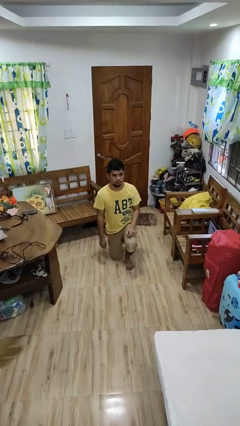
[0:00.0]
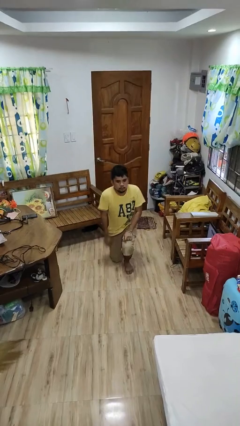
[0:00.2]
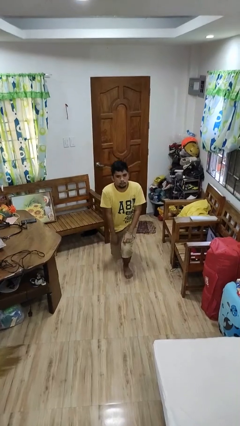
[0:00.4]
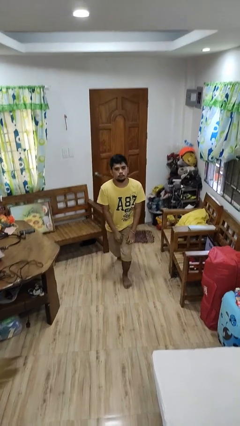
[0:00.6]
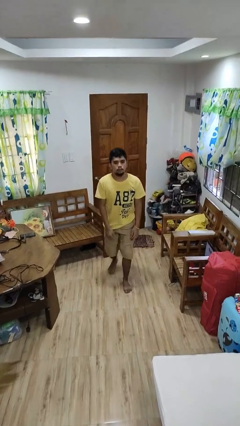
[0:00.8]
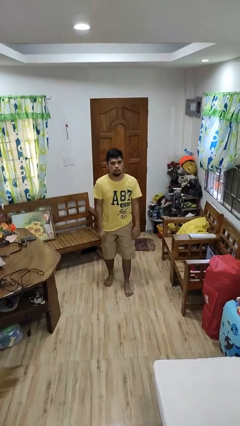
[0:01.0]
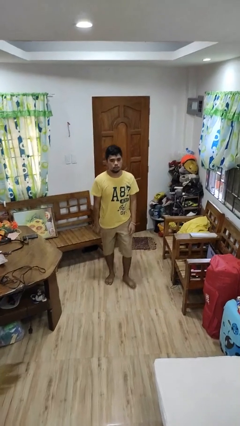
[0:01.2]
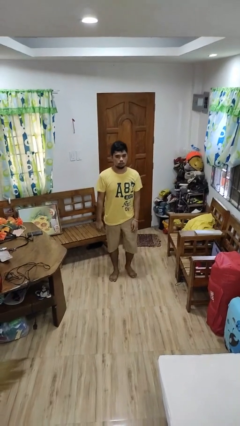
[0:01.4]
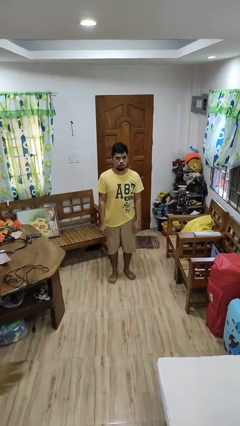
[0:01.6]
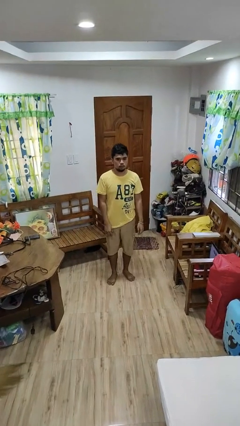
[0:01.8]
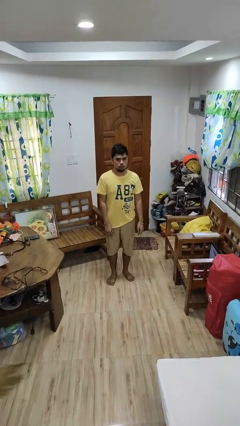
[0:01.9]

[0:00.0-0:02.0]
person stands up from floor

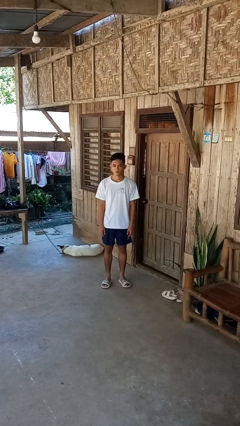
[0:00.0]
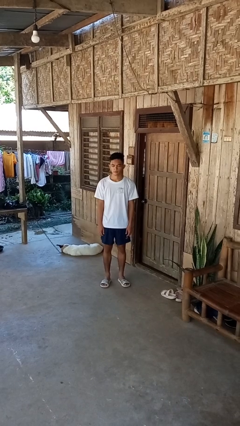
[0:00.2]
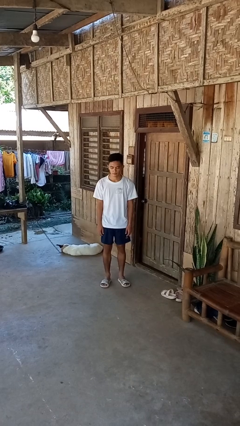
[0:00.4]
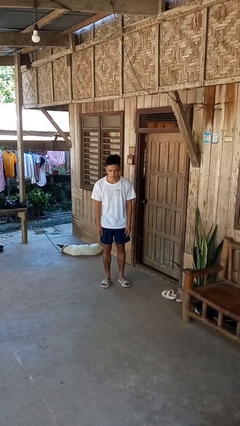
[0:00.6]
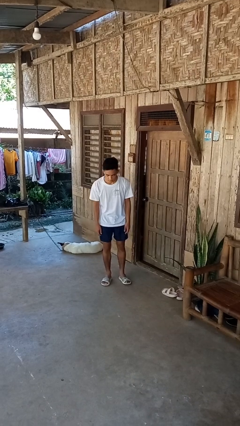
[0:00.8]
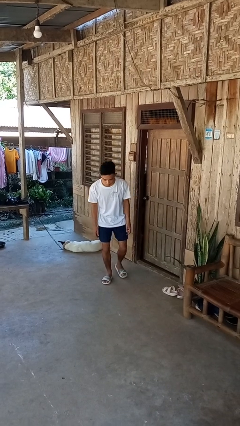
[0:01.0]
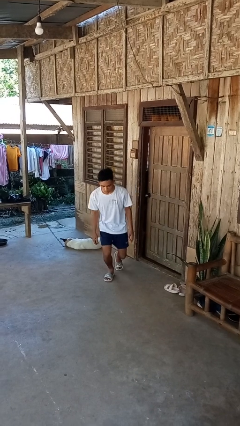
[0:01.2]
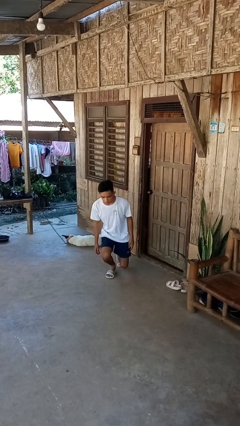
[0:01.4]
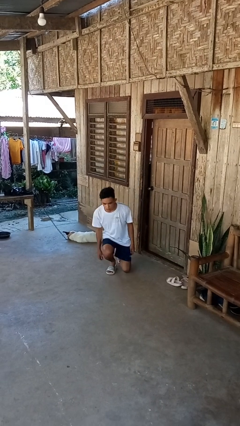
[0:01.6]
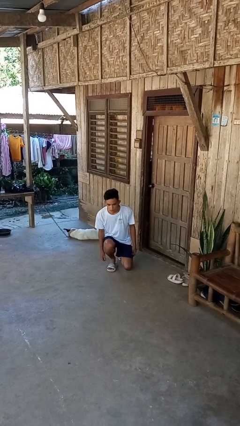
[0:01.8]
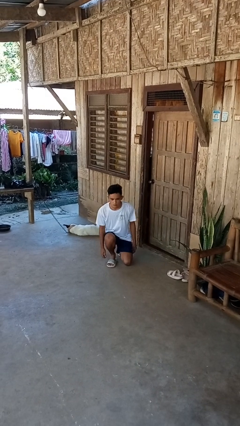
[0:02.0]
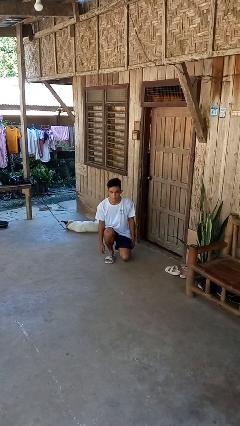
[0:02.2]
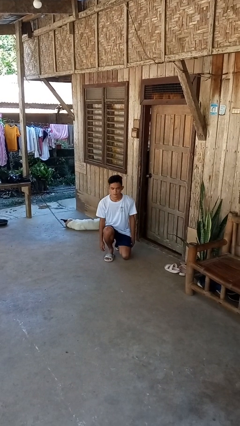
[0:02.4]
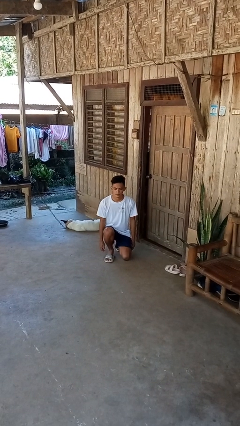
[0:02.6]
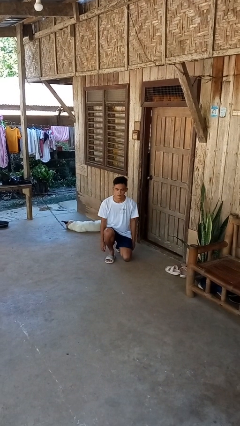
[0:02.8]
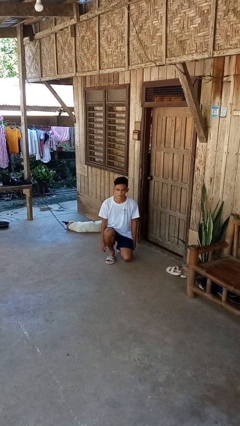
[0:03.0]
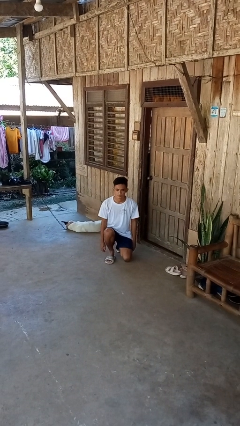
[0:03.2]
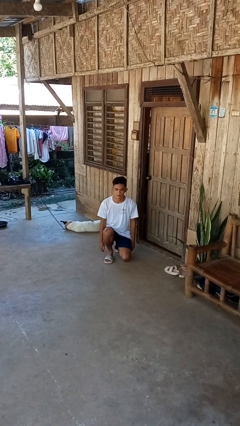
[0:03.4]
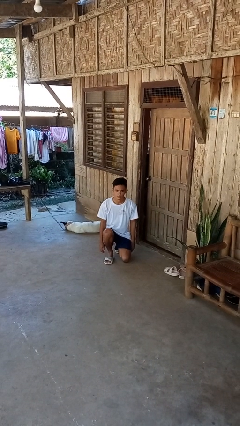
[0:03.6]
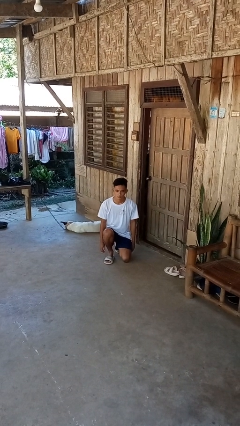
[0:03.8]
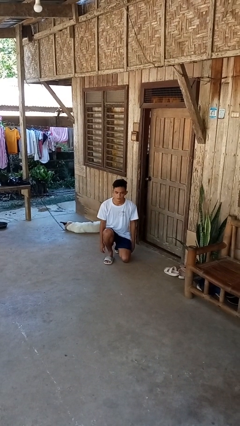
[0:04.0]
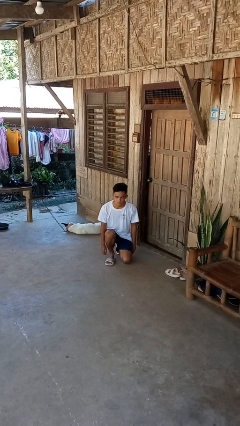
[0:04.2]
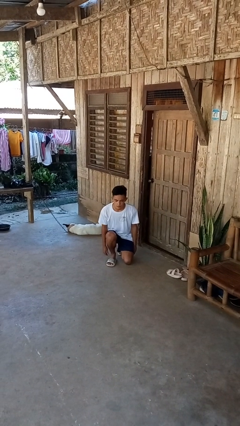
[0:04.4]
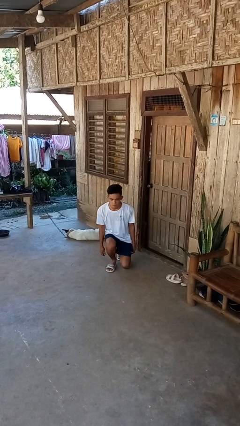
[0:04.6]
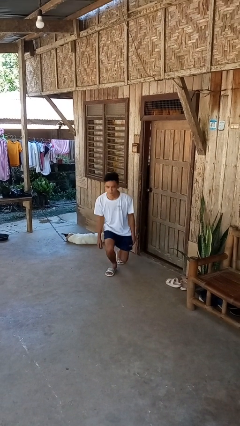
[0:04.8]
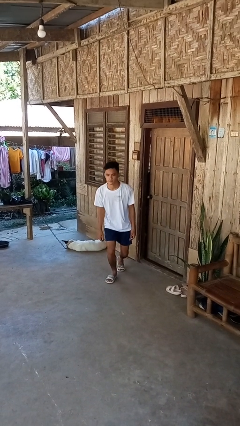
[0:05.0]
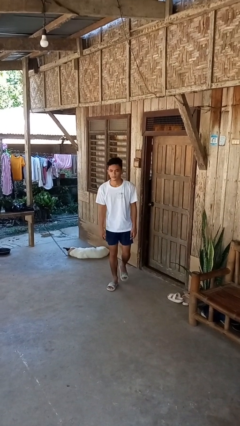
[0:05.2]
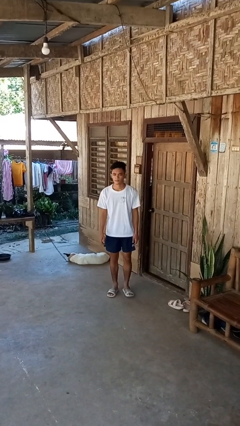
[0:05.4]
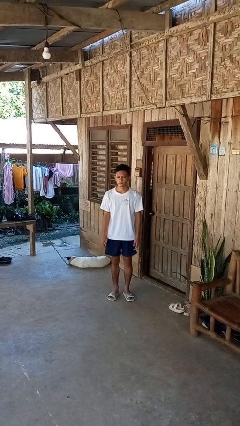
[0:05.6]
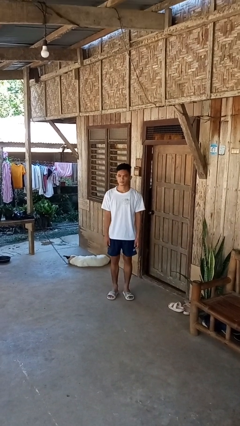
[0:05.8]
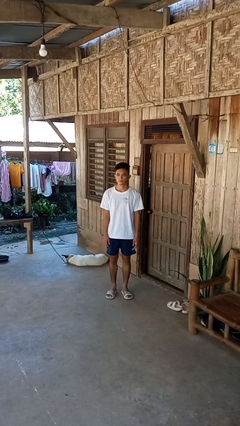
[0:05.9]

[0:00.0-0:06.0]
person kneels

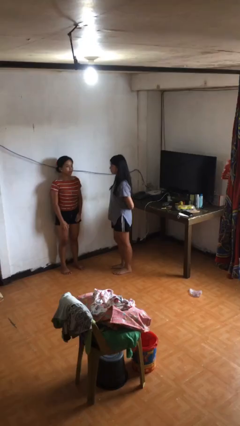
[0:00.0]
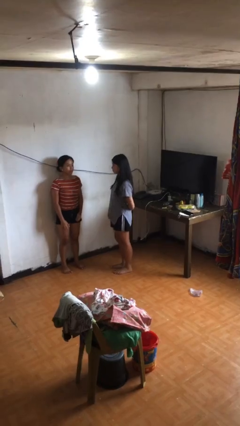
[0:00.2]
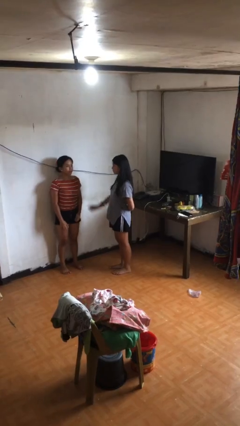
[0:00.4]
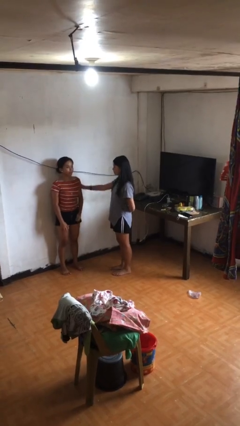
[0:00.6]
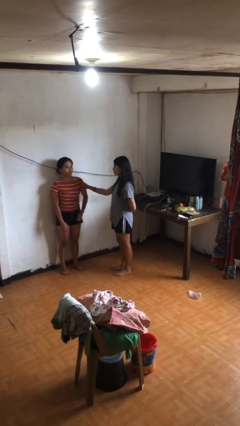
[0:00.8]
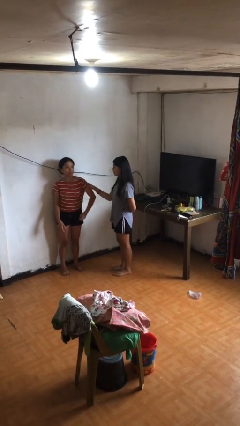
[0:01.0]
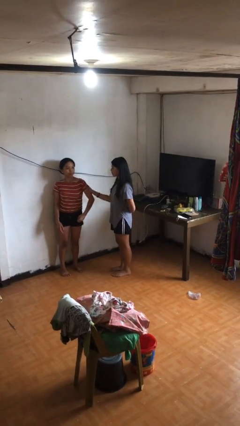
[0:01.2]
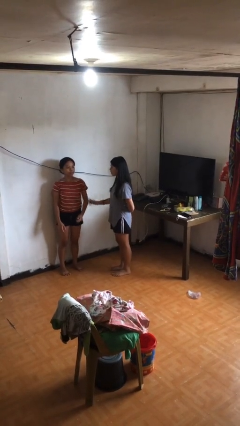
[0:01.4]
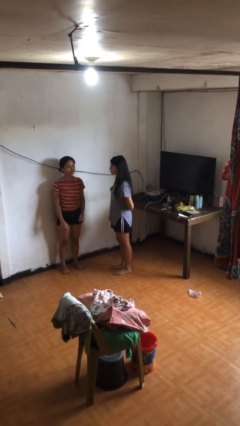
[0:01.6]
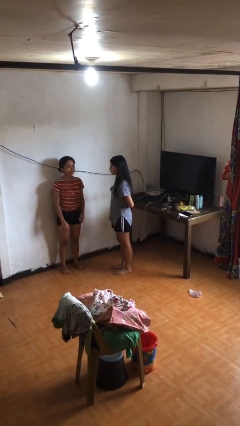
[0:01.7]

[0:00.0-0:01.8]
person grabs person by bicep

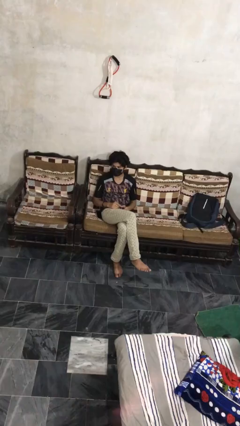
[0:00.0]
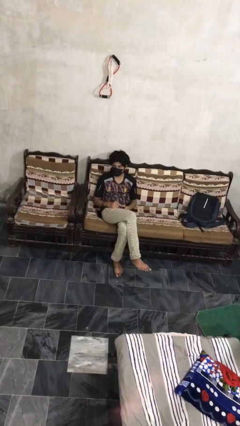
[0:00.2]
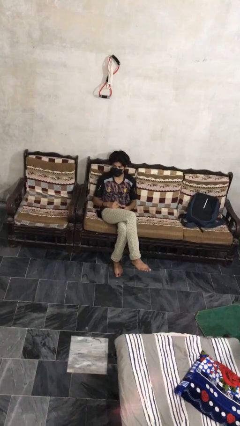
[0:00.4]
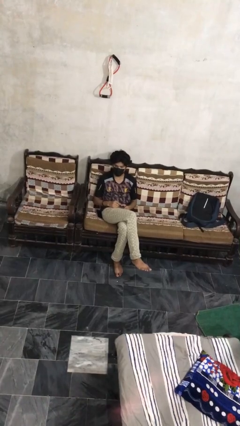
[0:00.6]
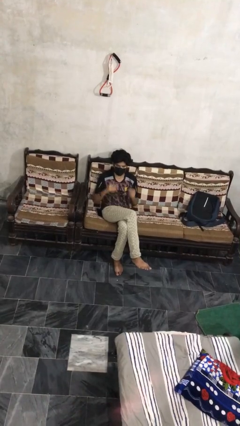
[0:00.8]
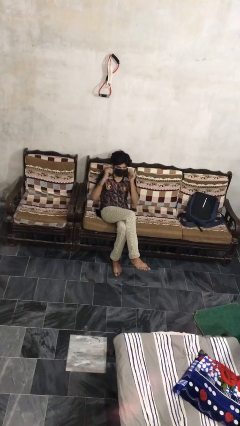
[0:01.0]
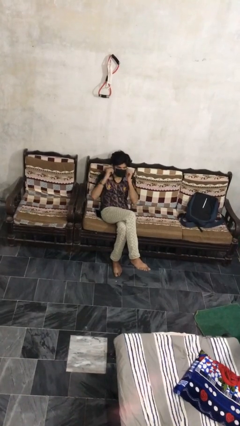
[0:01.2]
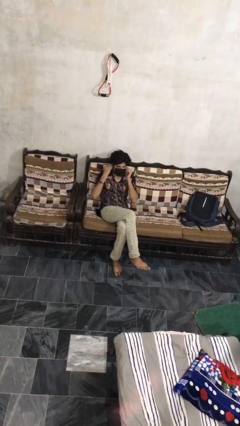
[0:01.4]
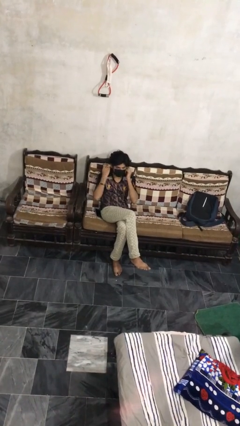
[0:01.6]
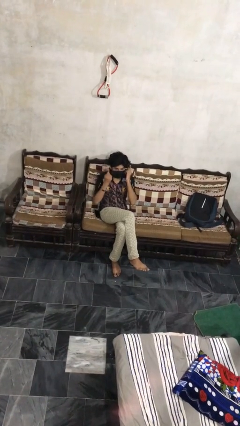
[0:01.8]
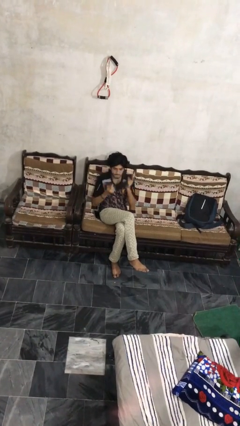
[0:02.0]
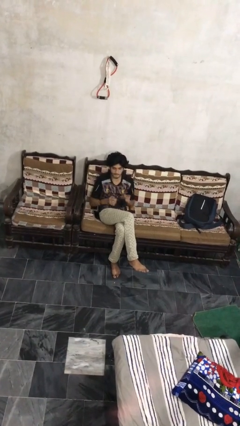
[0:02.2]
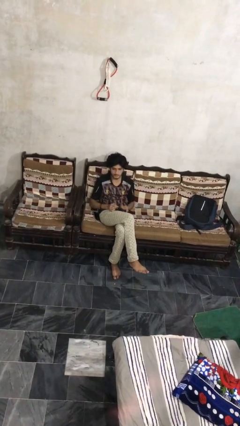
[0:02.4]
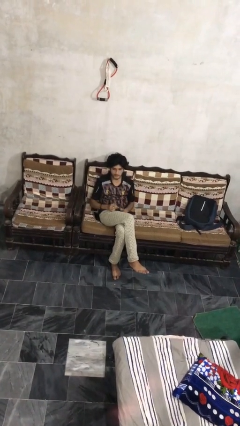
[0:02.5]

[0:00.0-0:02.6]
person takes off facemask

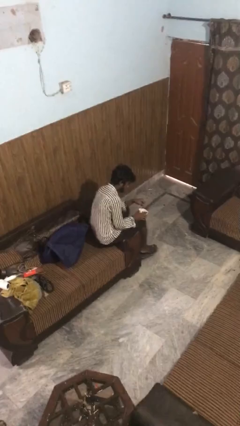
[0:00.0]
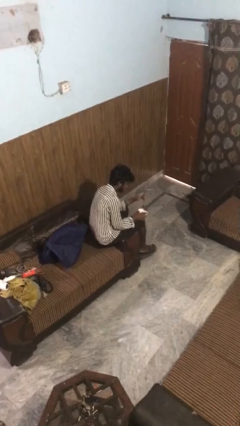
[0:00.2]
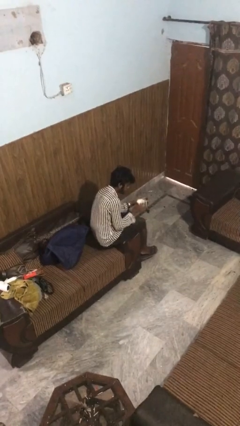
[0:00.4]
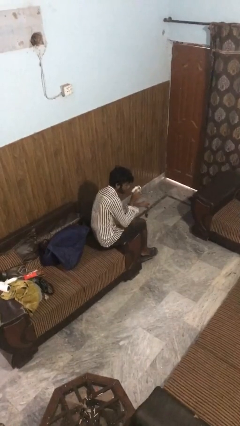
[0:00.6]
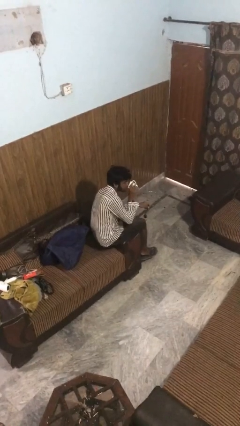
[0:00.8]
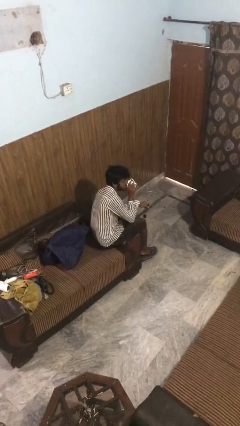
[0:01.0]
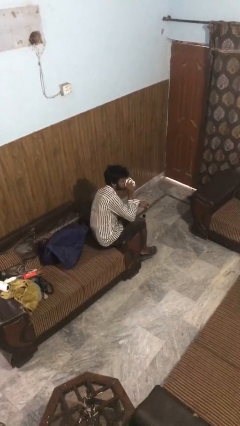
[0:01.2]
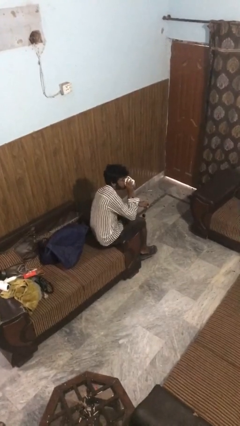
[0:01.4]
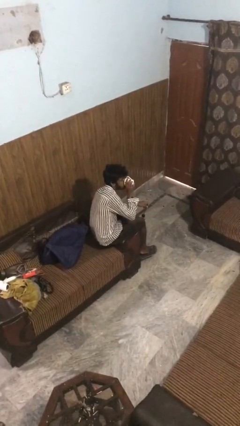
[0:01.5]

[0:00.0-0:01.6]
person drinks from mug

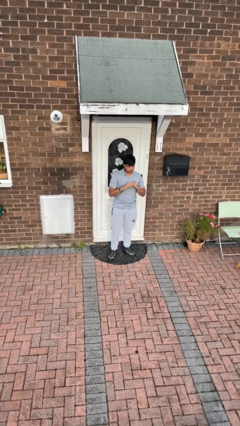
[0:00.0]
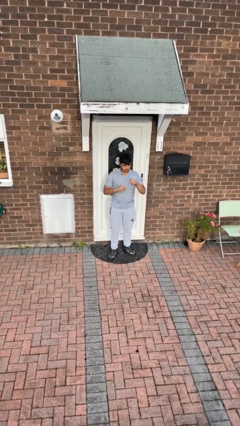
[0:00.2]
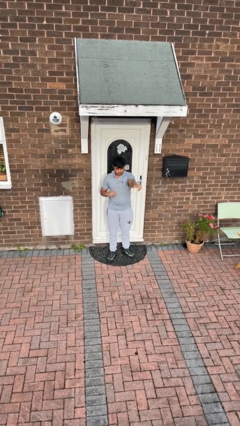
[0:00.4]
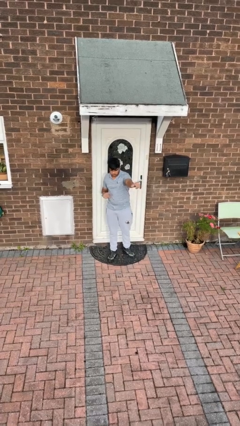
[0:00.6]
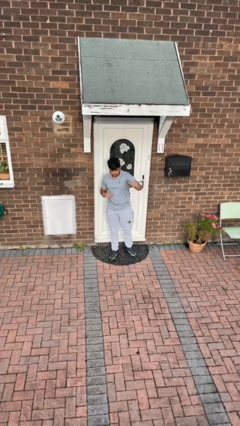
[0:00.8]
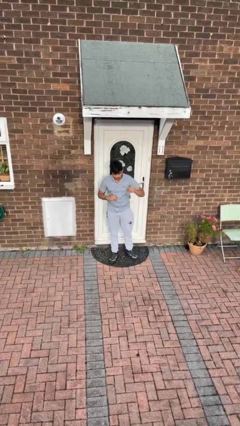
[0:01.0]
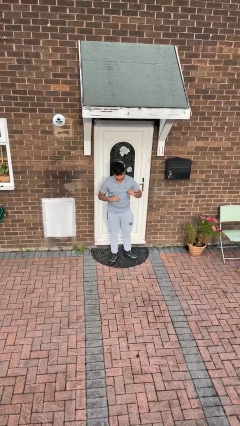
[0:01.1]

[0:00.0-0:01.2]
person punches

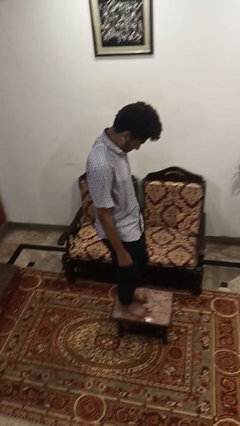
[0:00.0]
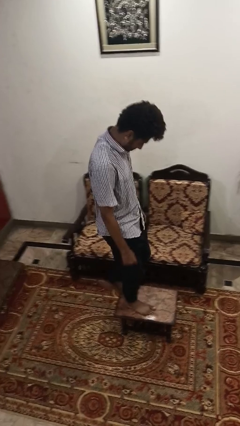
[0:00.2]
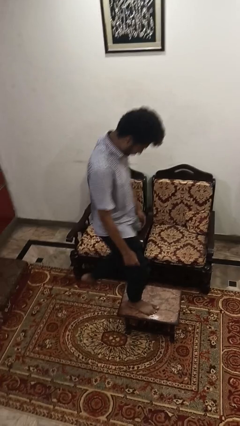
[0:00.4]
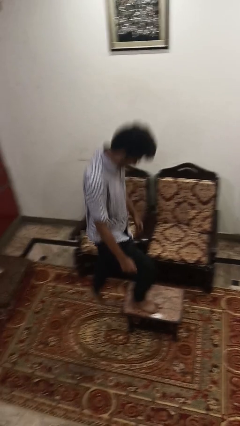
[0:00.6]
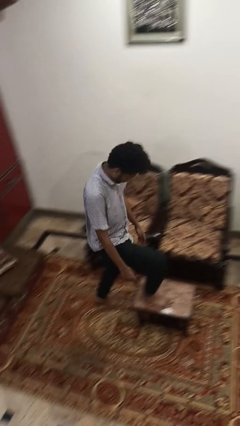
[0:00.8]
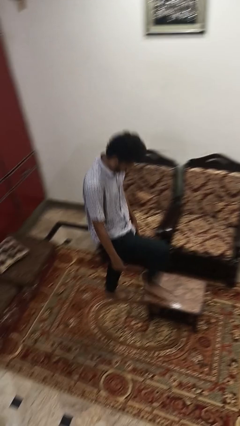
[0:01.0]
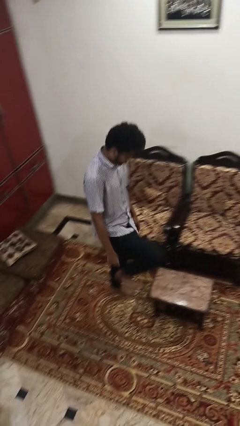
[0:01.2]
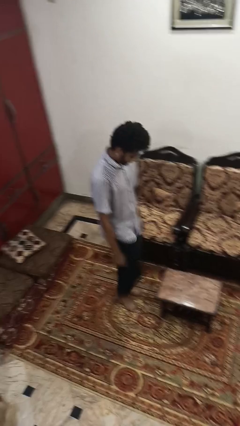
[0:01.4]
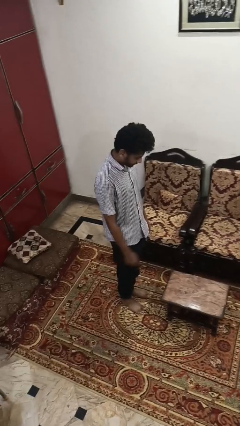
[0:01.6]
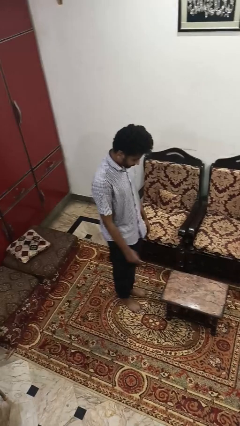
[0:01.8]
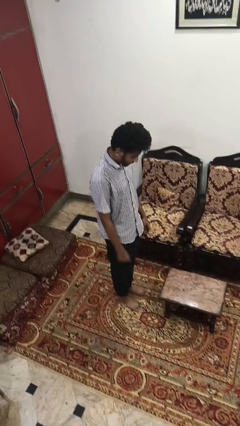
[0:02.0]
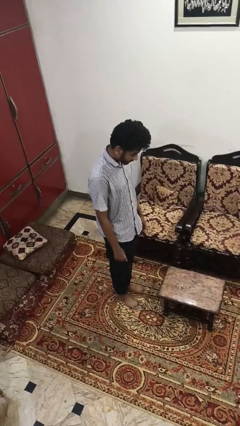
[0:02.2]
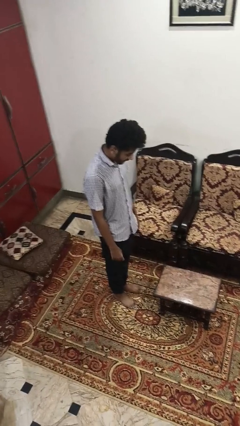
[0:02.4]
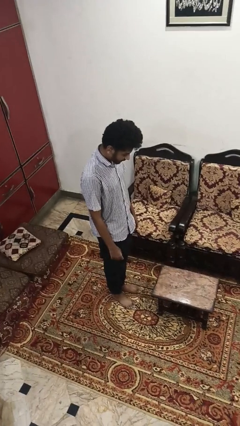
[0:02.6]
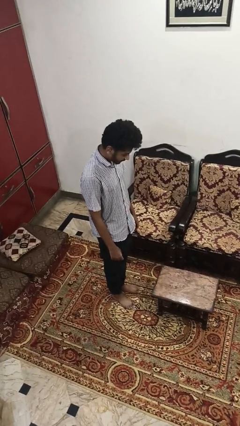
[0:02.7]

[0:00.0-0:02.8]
person climbs off table
